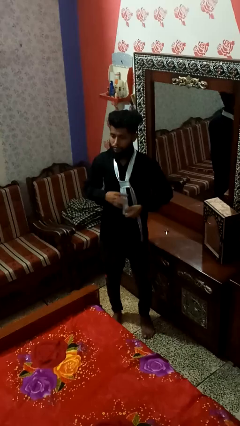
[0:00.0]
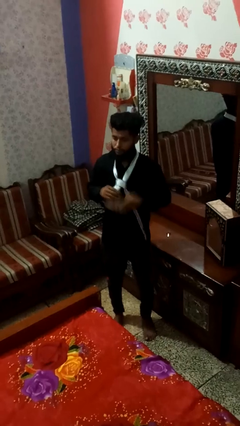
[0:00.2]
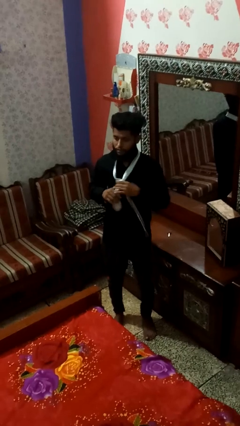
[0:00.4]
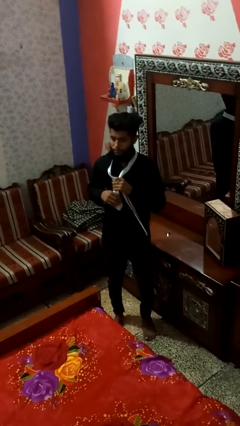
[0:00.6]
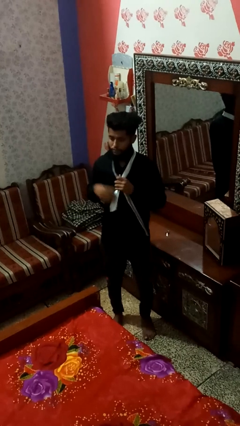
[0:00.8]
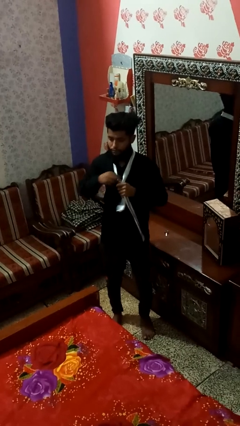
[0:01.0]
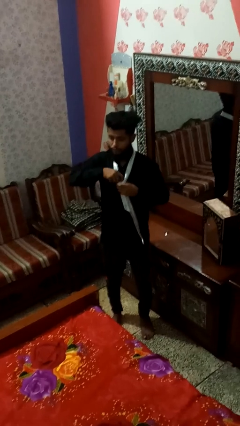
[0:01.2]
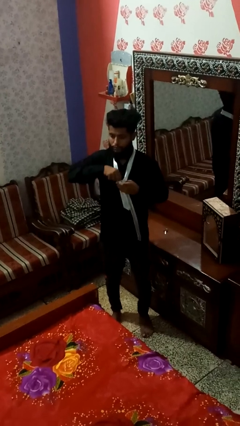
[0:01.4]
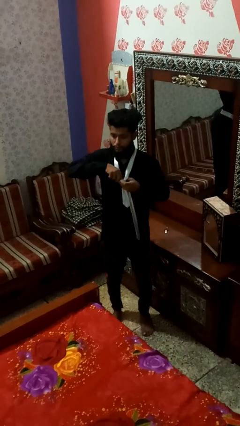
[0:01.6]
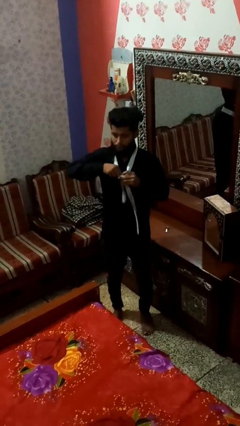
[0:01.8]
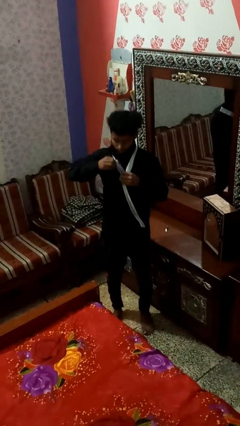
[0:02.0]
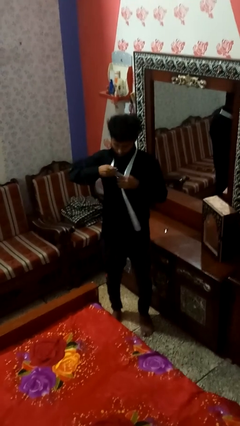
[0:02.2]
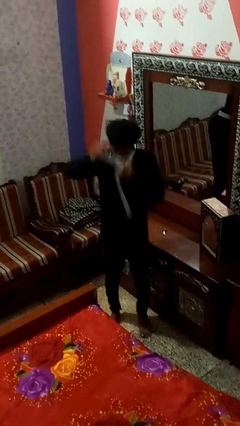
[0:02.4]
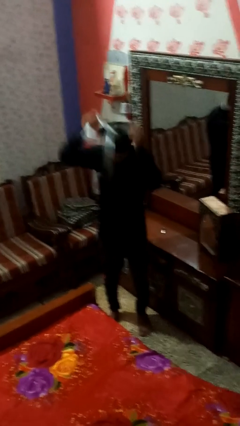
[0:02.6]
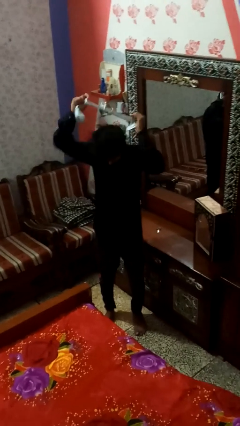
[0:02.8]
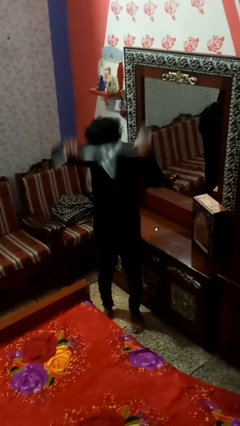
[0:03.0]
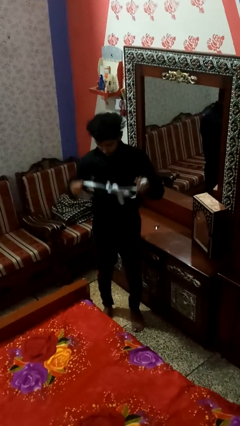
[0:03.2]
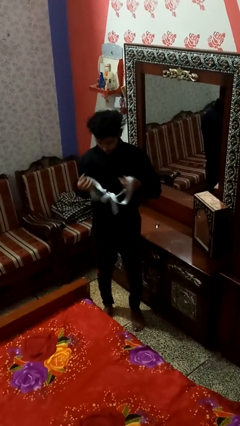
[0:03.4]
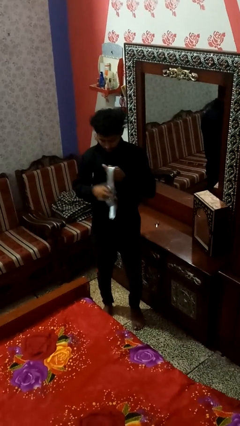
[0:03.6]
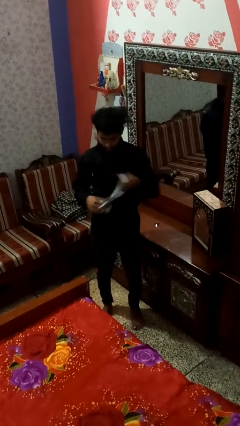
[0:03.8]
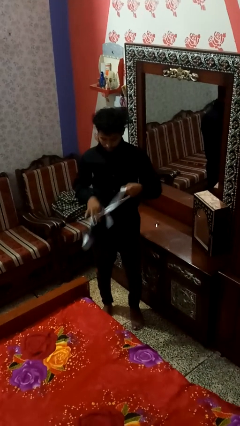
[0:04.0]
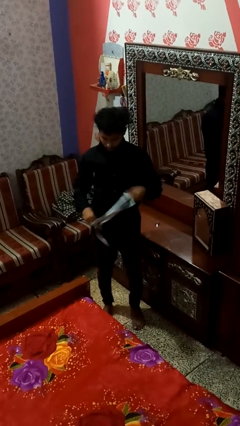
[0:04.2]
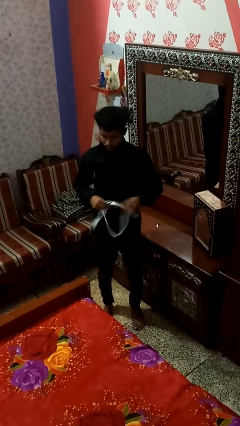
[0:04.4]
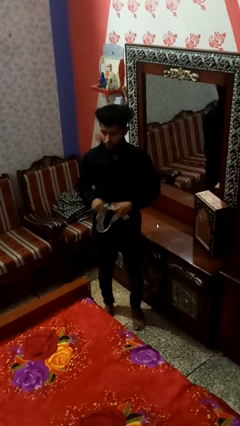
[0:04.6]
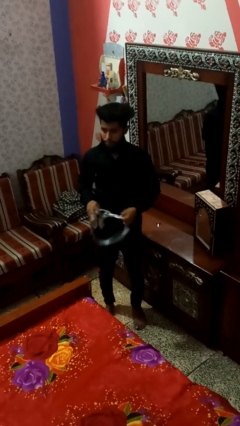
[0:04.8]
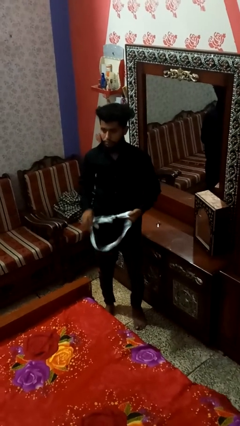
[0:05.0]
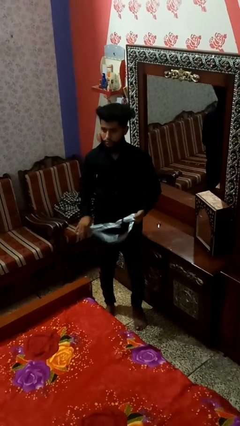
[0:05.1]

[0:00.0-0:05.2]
person takes off necktie

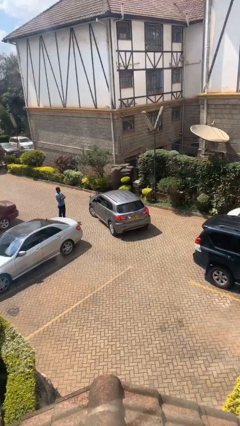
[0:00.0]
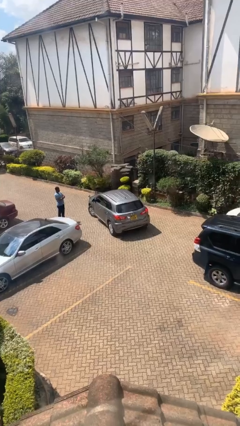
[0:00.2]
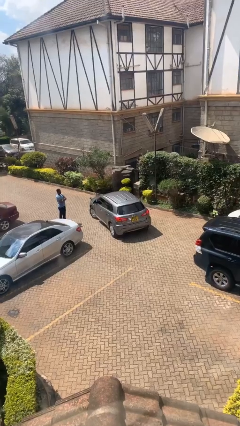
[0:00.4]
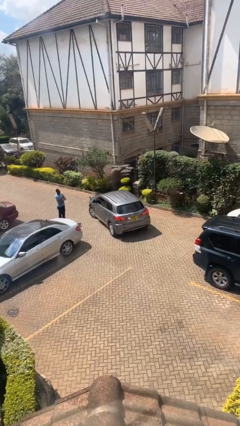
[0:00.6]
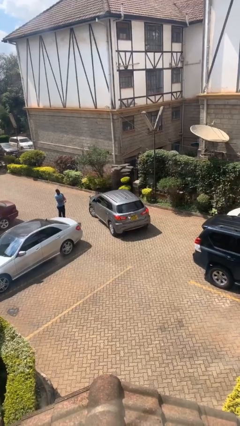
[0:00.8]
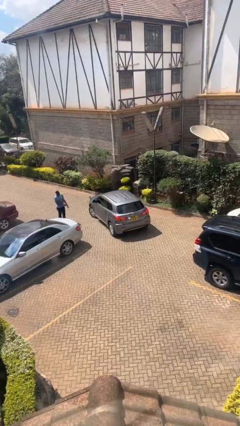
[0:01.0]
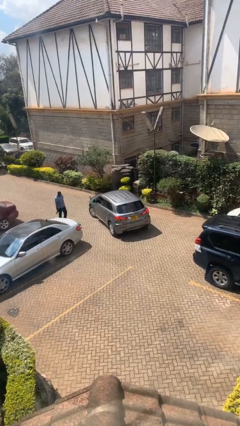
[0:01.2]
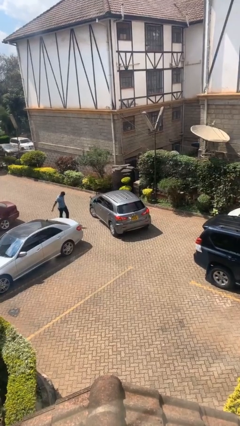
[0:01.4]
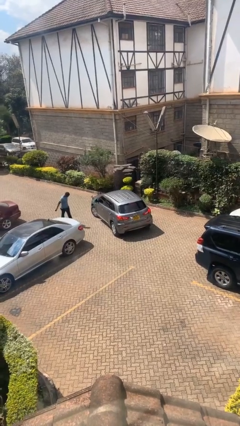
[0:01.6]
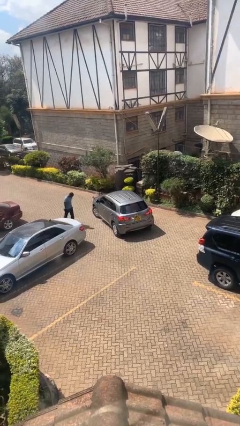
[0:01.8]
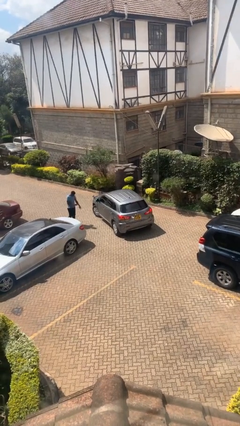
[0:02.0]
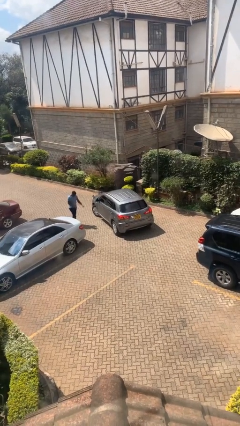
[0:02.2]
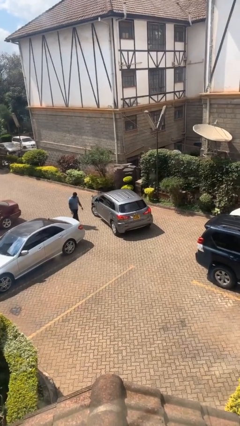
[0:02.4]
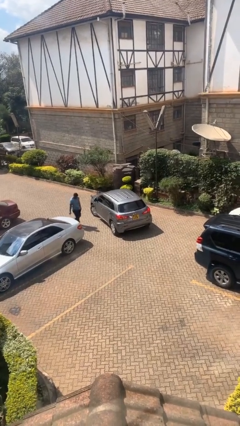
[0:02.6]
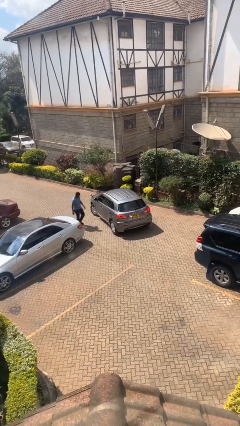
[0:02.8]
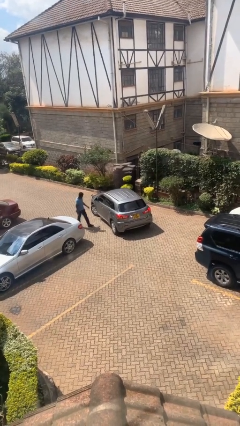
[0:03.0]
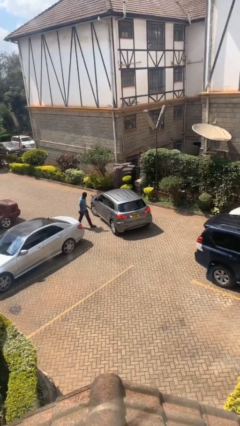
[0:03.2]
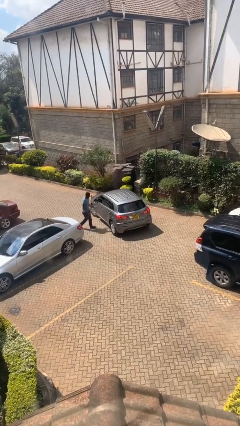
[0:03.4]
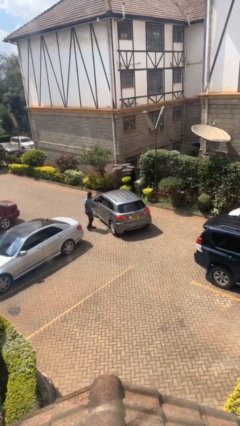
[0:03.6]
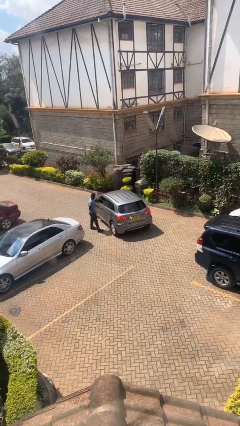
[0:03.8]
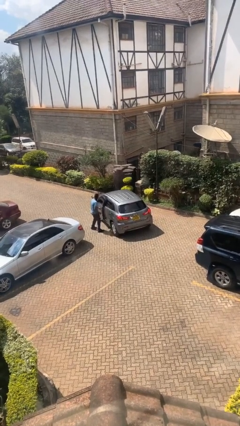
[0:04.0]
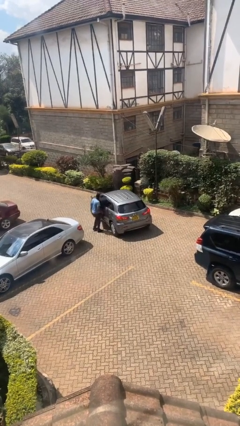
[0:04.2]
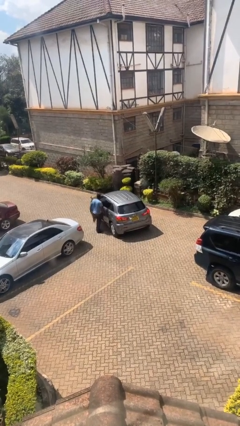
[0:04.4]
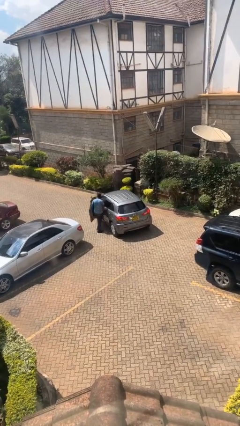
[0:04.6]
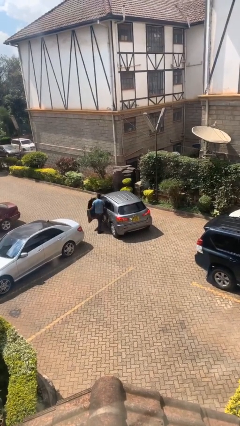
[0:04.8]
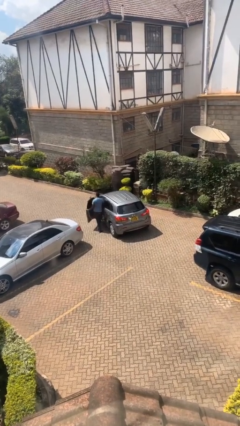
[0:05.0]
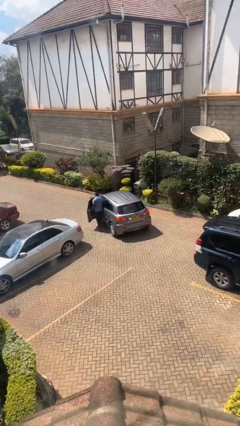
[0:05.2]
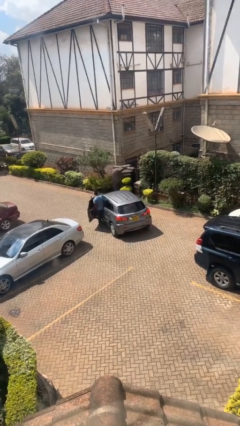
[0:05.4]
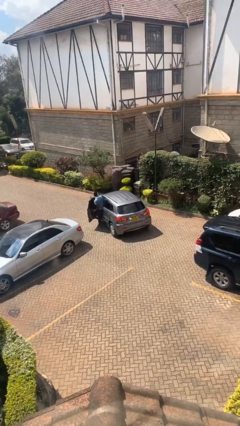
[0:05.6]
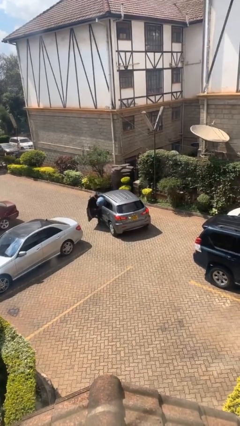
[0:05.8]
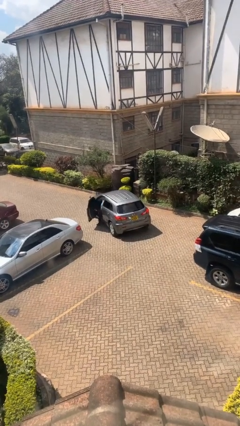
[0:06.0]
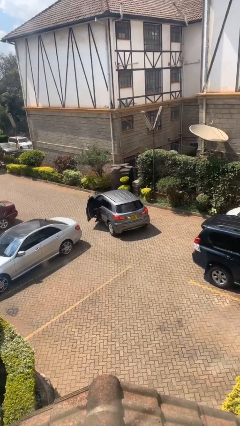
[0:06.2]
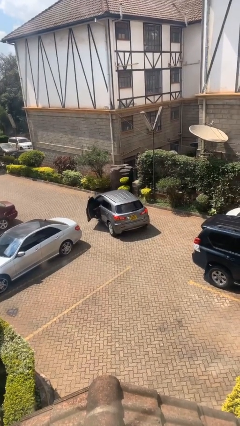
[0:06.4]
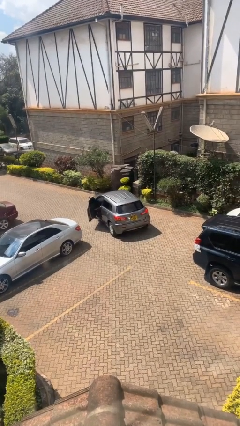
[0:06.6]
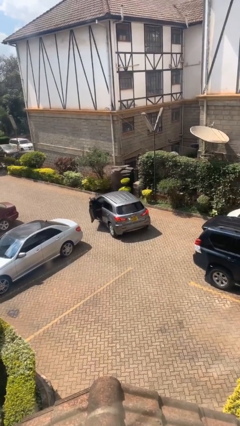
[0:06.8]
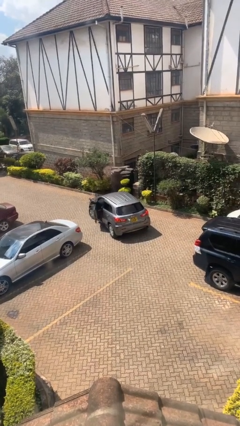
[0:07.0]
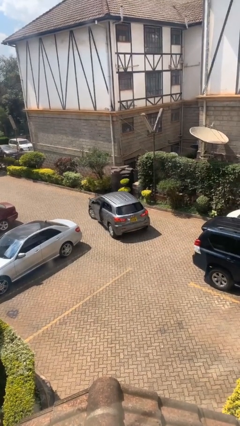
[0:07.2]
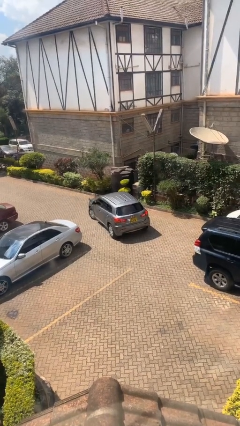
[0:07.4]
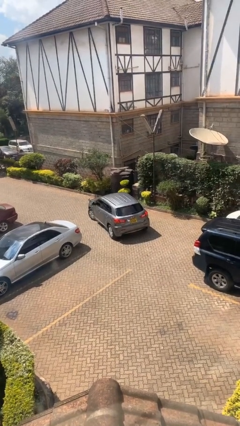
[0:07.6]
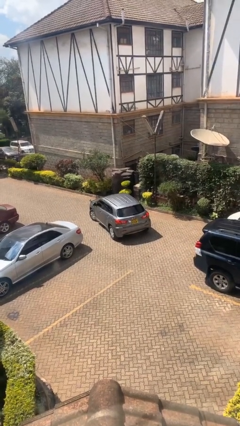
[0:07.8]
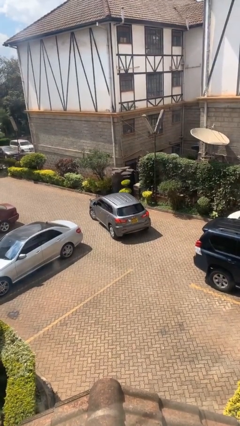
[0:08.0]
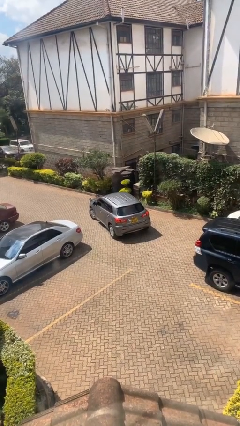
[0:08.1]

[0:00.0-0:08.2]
car picks up person

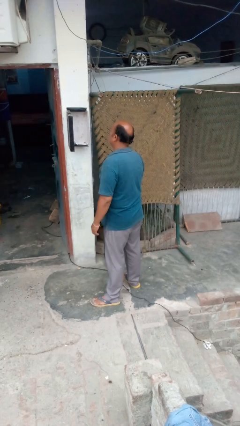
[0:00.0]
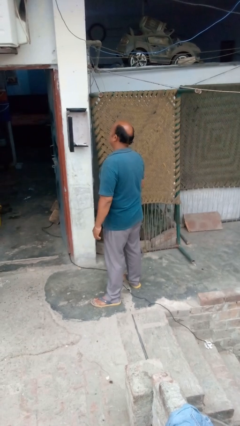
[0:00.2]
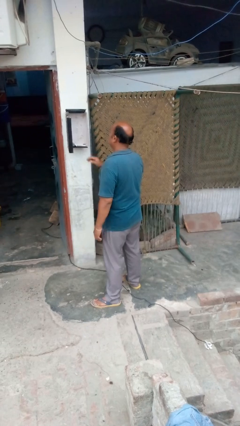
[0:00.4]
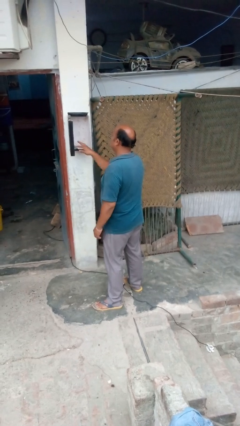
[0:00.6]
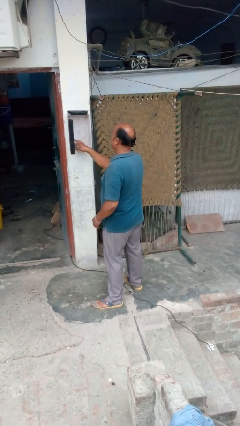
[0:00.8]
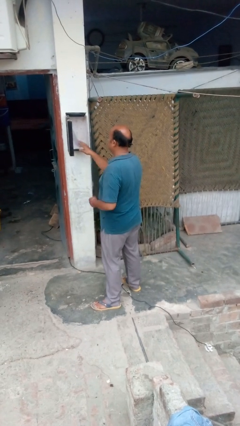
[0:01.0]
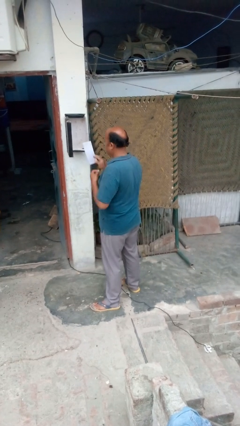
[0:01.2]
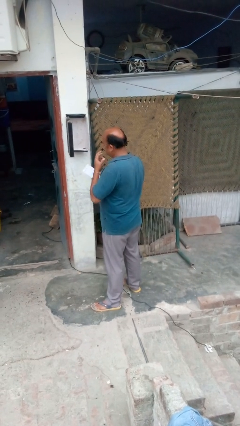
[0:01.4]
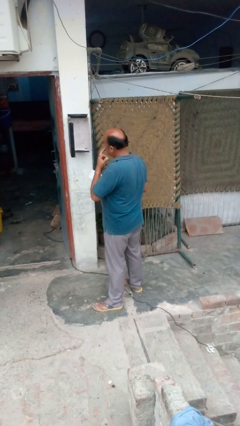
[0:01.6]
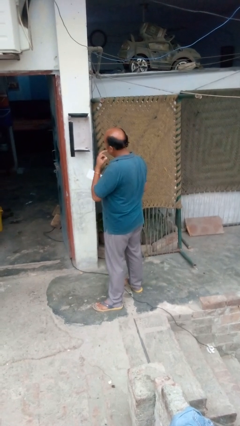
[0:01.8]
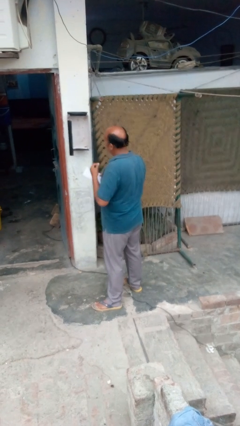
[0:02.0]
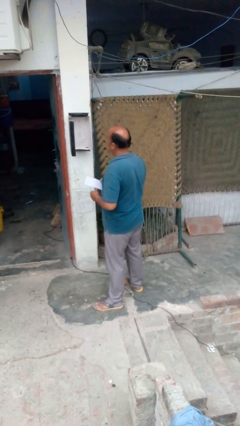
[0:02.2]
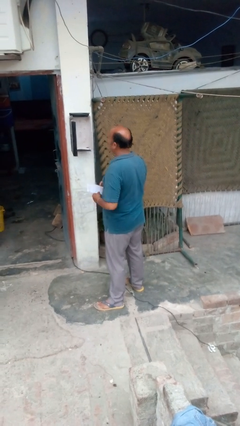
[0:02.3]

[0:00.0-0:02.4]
person takes letters from mailbox

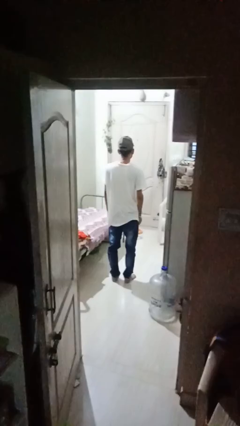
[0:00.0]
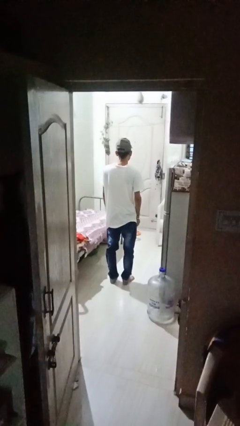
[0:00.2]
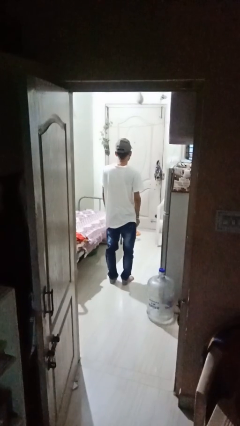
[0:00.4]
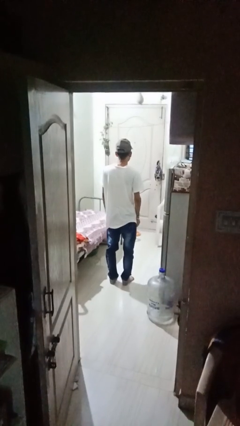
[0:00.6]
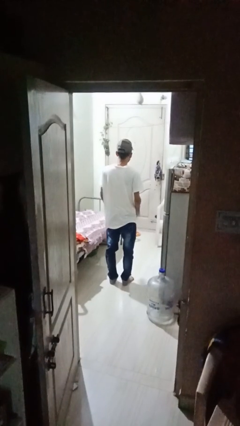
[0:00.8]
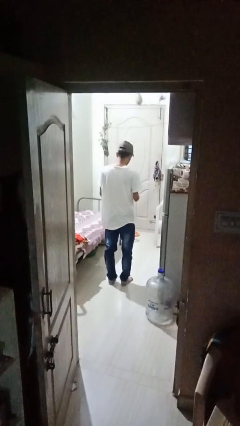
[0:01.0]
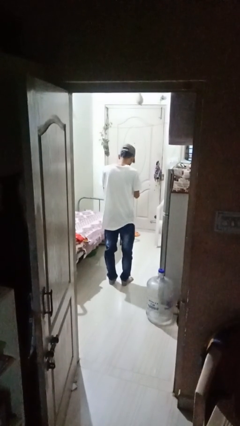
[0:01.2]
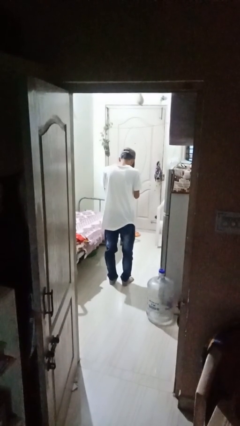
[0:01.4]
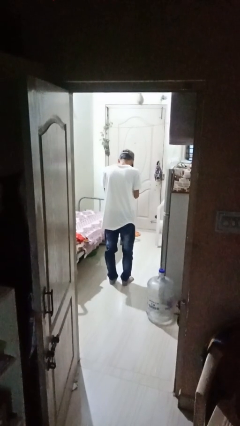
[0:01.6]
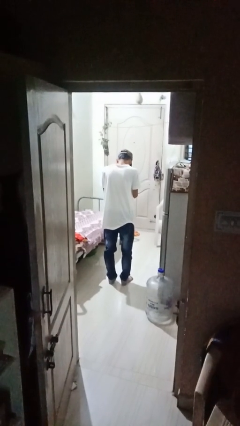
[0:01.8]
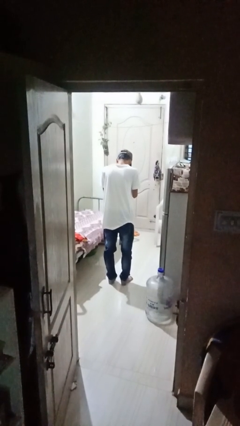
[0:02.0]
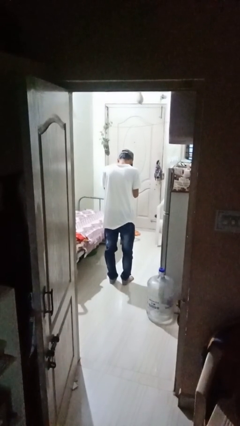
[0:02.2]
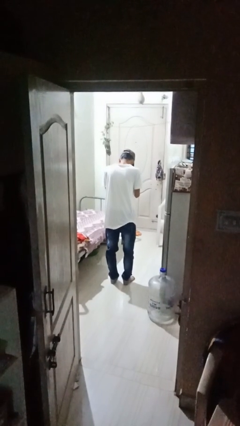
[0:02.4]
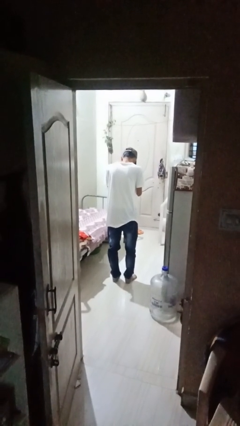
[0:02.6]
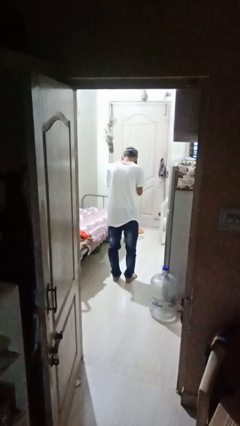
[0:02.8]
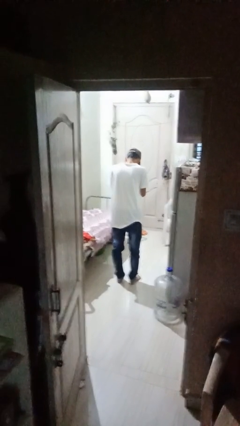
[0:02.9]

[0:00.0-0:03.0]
person prays
